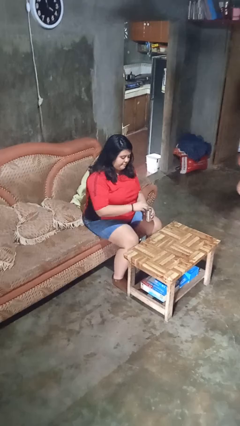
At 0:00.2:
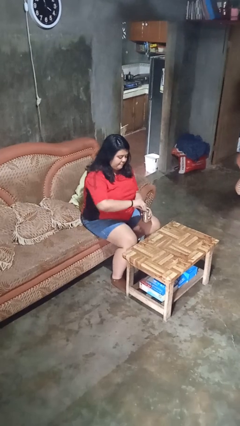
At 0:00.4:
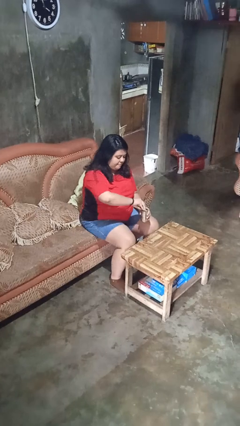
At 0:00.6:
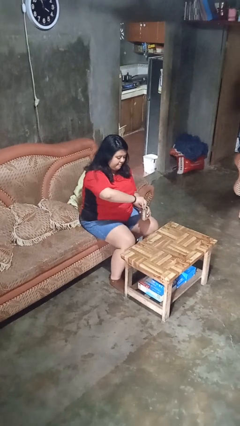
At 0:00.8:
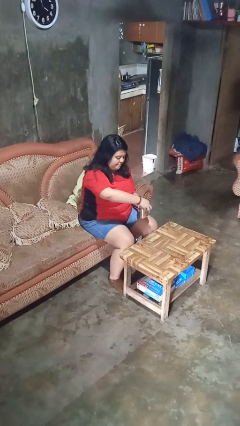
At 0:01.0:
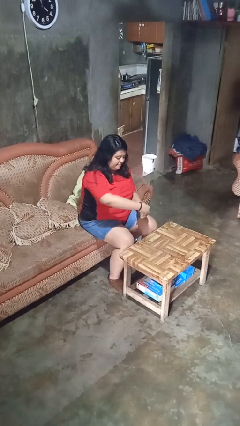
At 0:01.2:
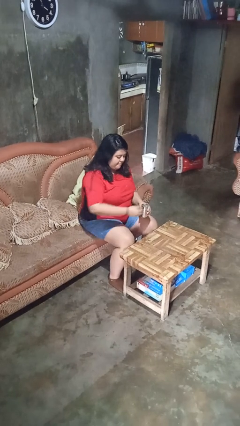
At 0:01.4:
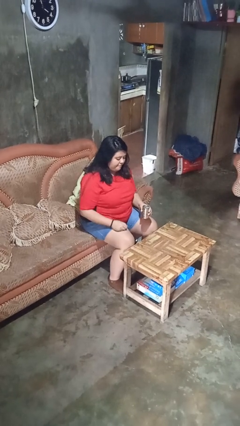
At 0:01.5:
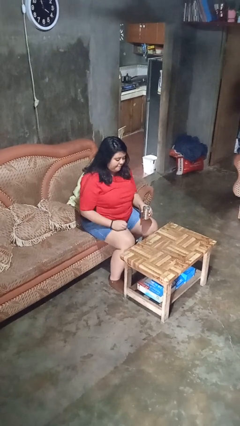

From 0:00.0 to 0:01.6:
person opens beverage can

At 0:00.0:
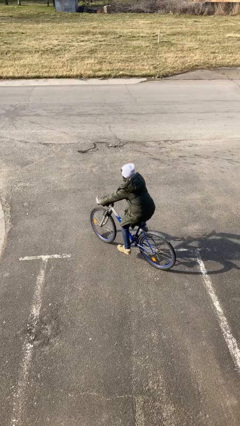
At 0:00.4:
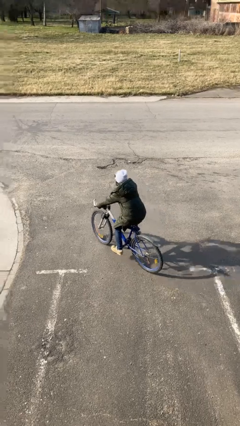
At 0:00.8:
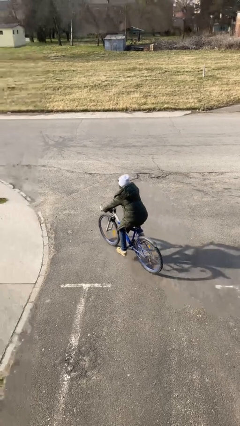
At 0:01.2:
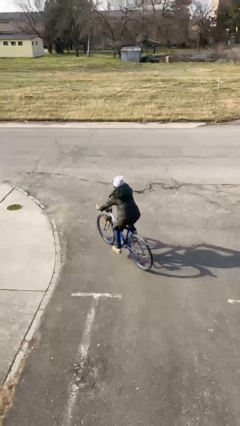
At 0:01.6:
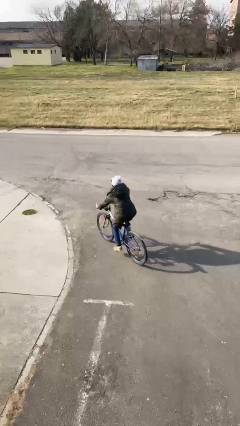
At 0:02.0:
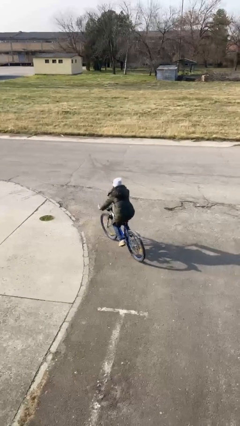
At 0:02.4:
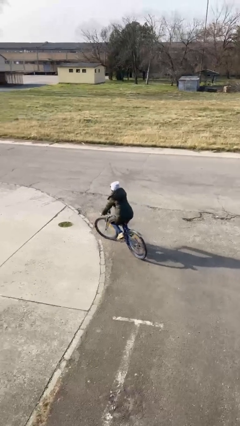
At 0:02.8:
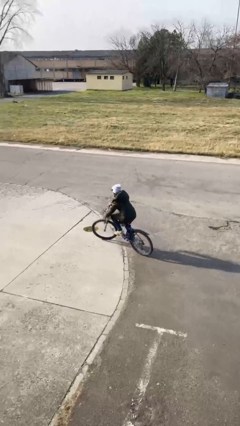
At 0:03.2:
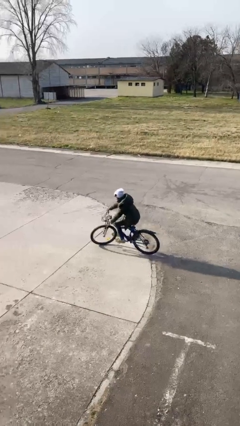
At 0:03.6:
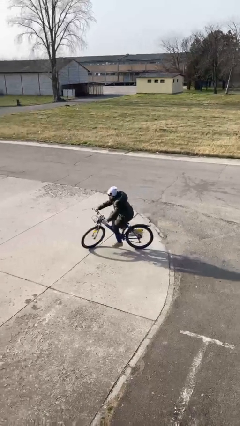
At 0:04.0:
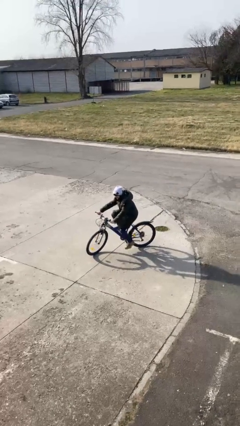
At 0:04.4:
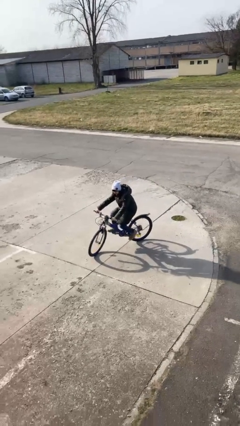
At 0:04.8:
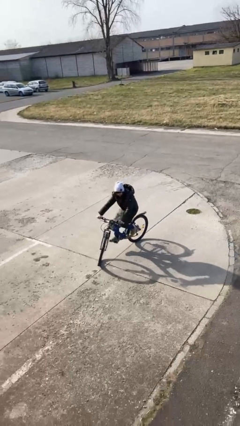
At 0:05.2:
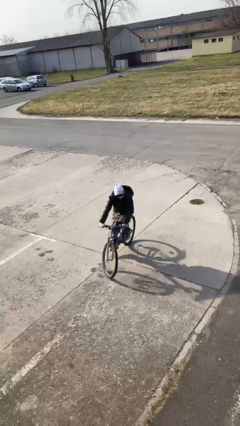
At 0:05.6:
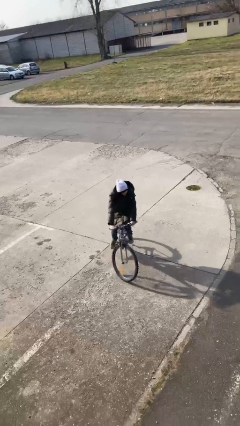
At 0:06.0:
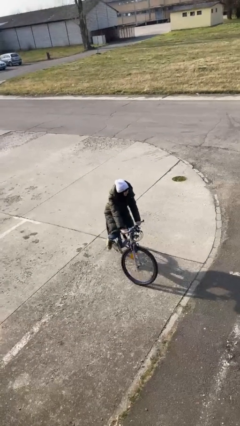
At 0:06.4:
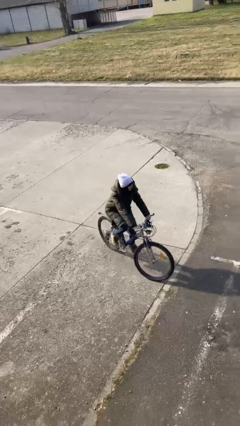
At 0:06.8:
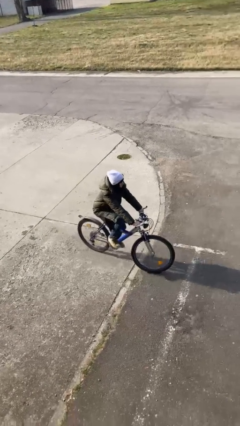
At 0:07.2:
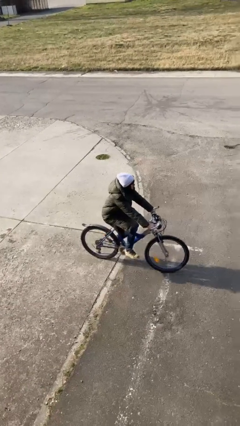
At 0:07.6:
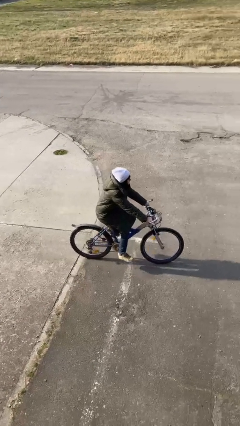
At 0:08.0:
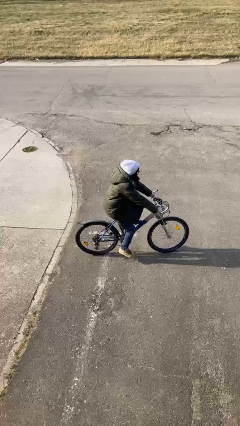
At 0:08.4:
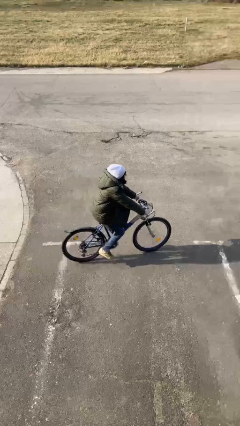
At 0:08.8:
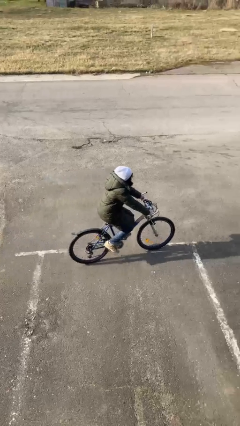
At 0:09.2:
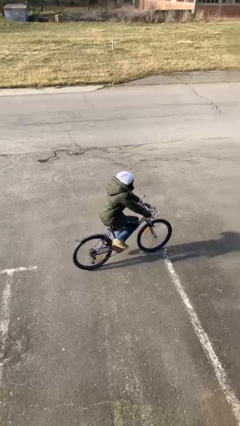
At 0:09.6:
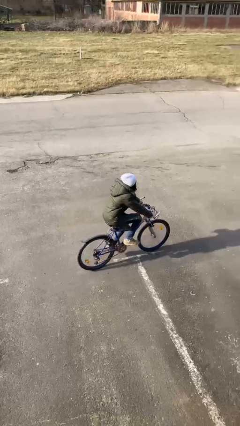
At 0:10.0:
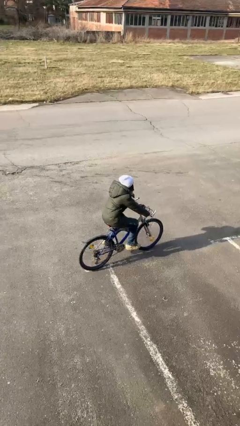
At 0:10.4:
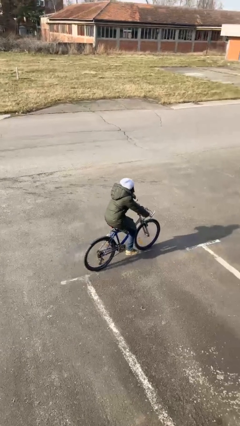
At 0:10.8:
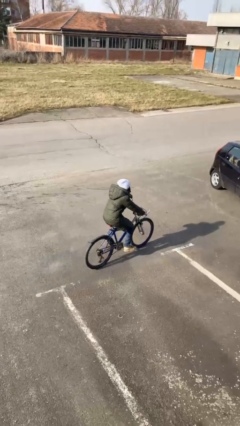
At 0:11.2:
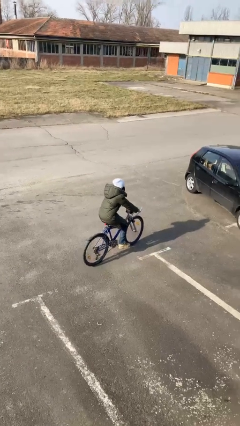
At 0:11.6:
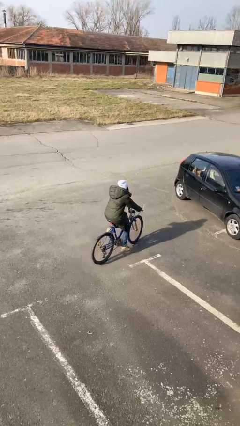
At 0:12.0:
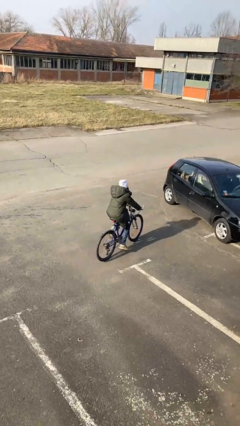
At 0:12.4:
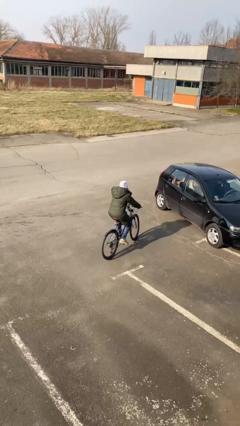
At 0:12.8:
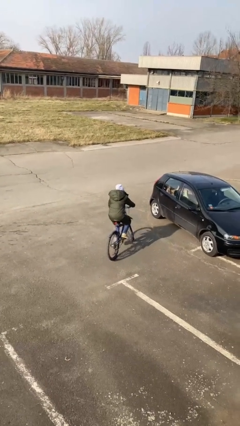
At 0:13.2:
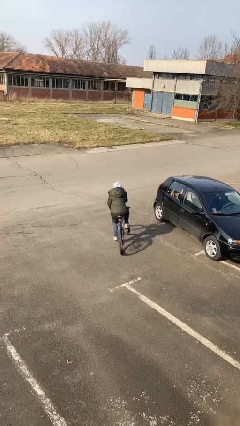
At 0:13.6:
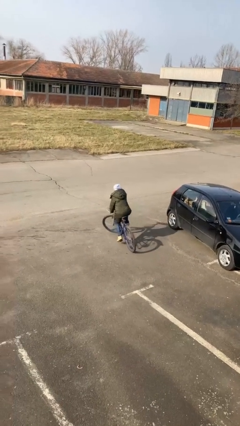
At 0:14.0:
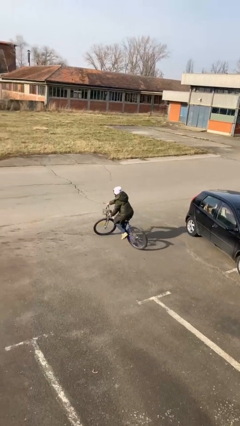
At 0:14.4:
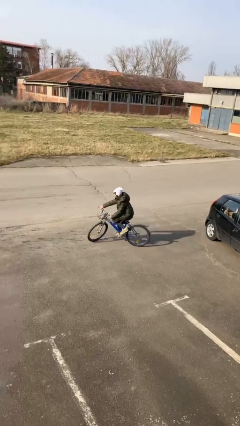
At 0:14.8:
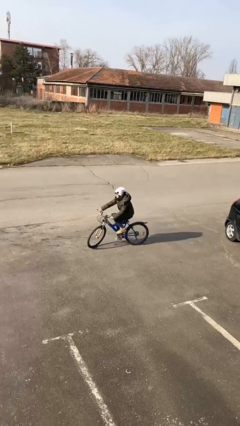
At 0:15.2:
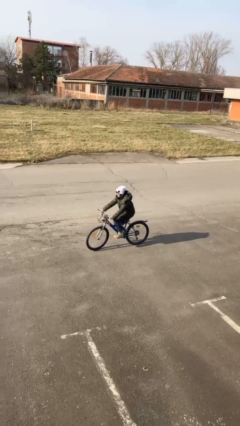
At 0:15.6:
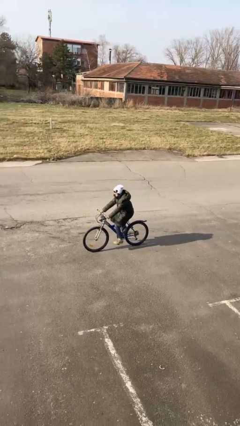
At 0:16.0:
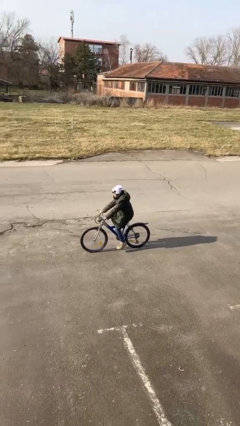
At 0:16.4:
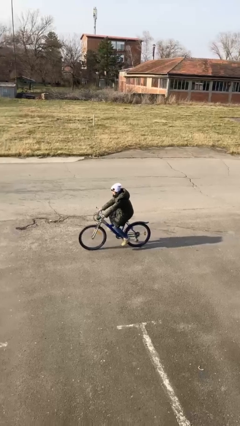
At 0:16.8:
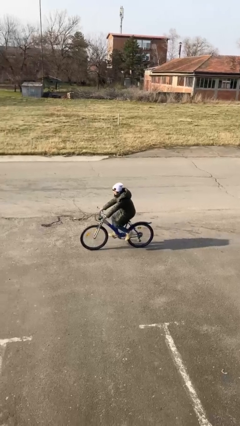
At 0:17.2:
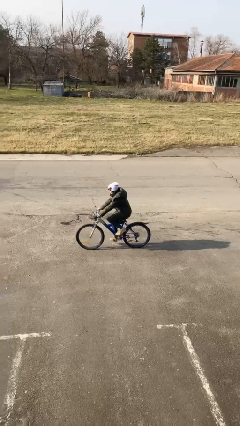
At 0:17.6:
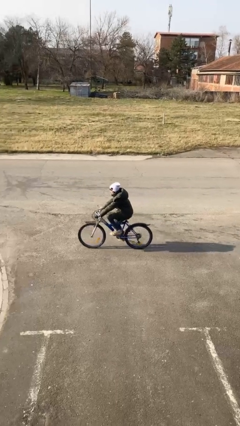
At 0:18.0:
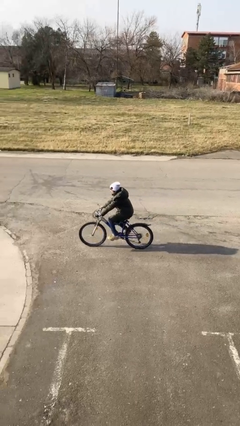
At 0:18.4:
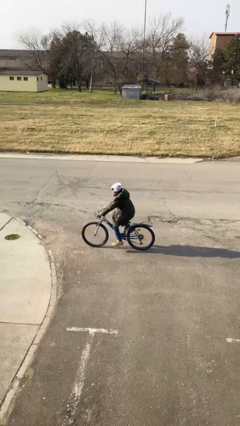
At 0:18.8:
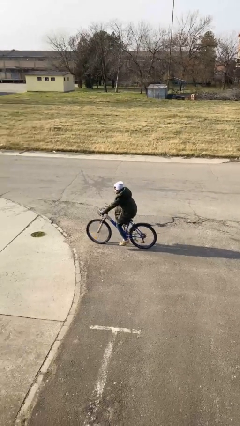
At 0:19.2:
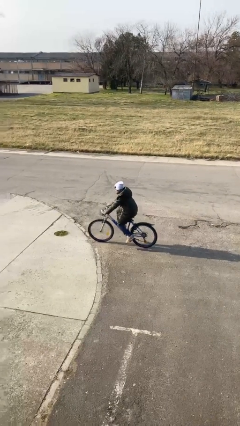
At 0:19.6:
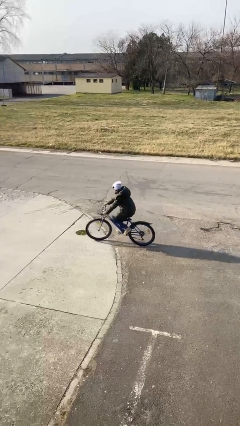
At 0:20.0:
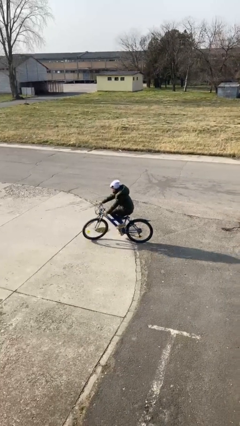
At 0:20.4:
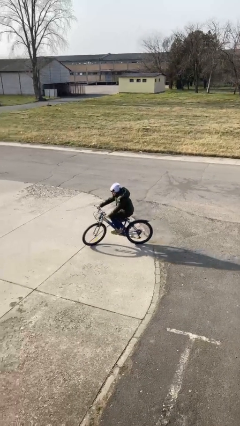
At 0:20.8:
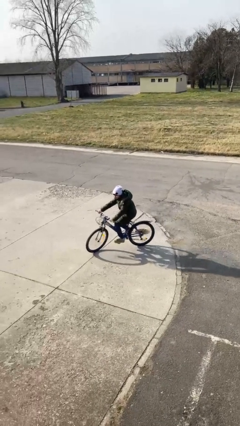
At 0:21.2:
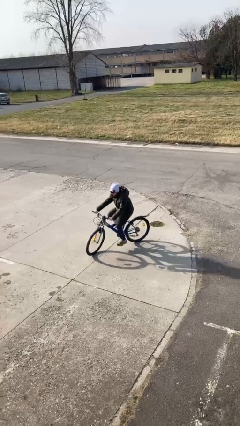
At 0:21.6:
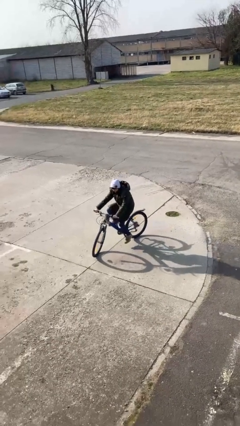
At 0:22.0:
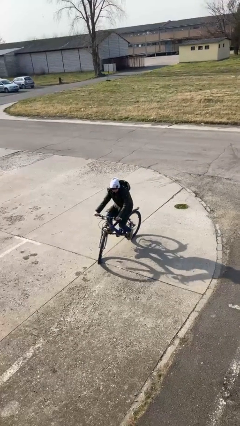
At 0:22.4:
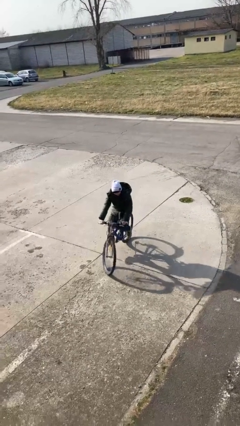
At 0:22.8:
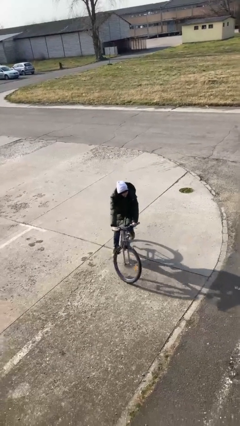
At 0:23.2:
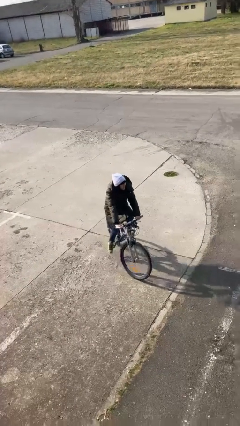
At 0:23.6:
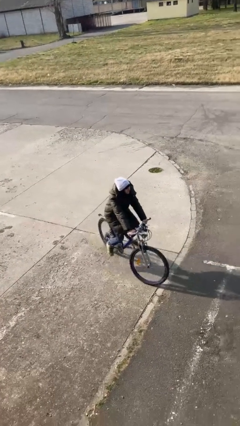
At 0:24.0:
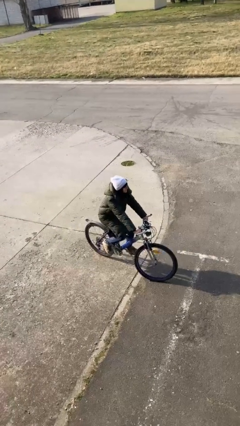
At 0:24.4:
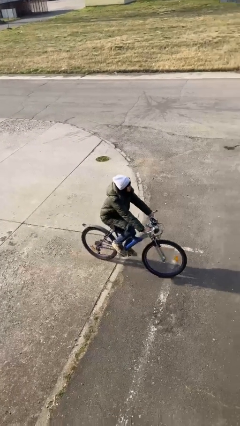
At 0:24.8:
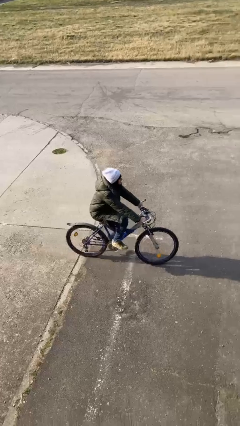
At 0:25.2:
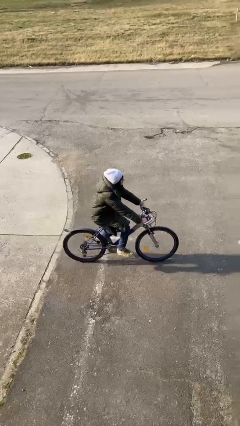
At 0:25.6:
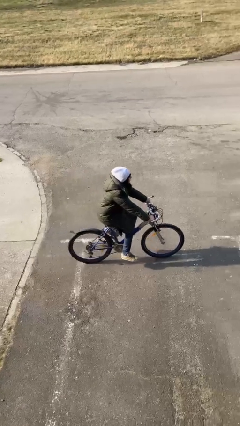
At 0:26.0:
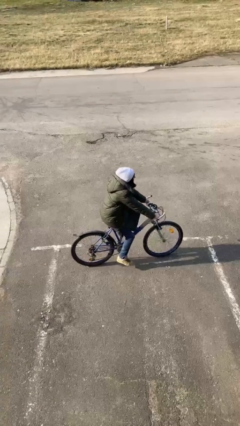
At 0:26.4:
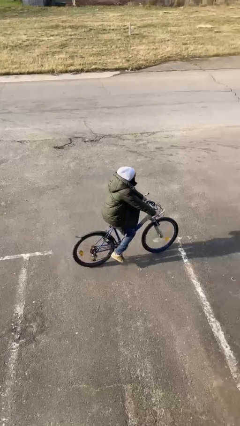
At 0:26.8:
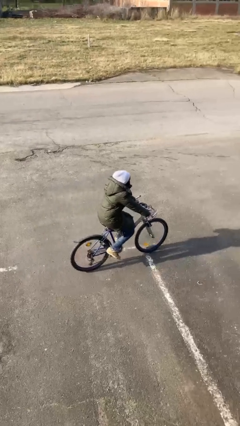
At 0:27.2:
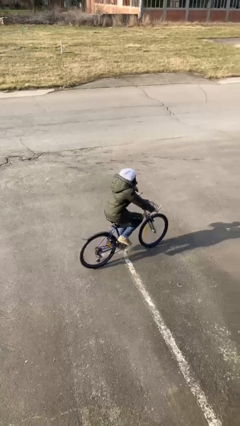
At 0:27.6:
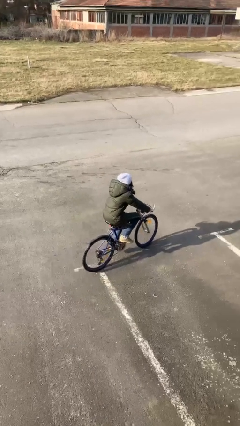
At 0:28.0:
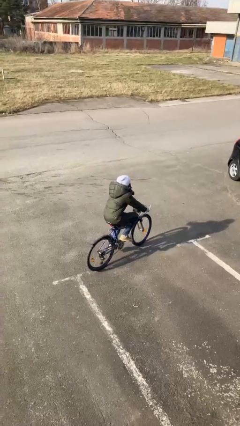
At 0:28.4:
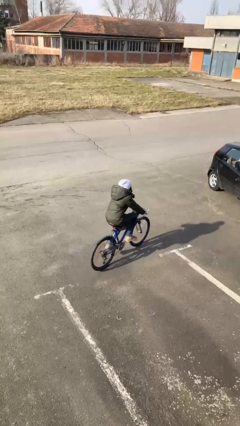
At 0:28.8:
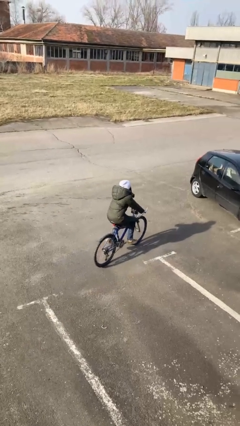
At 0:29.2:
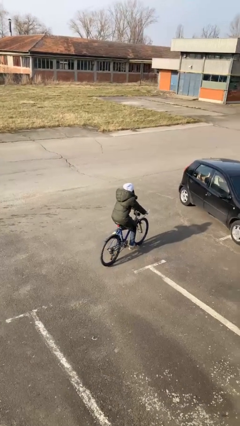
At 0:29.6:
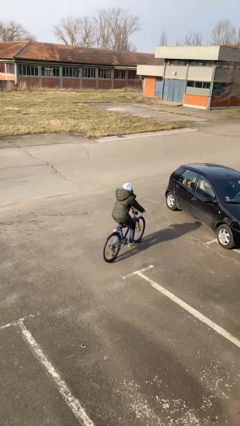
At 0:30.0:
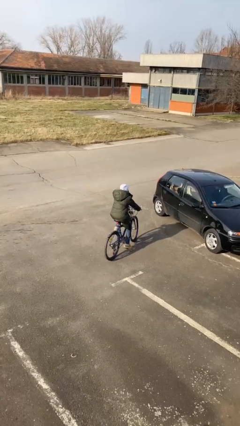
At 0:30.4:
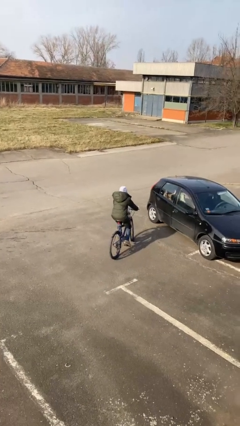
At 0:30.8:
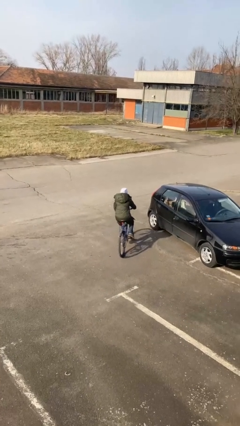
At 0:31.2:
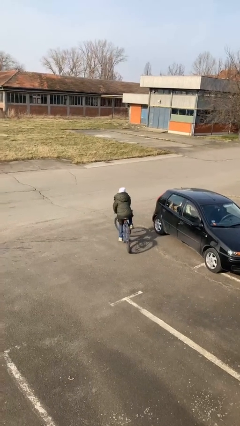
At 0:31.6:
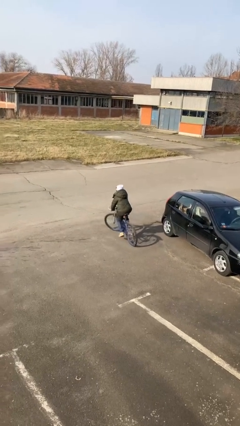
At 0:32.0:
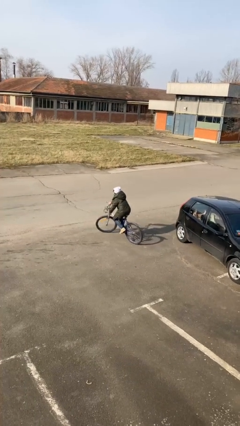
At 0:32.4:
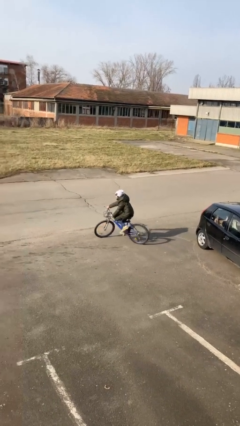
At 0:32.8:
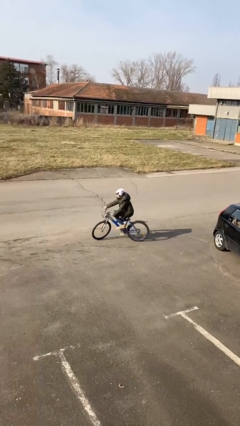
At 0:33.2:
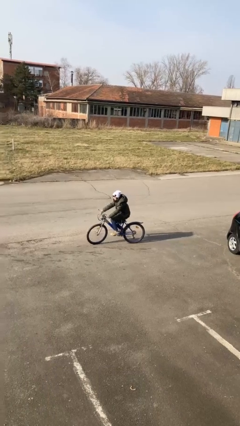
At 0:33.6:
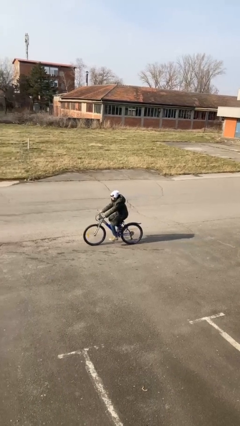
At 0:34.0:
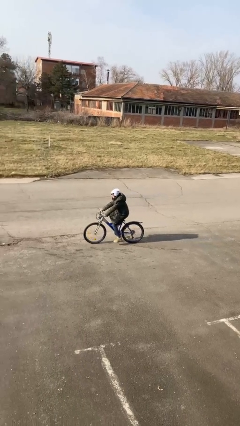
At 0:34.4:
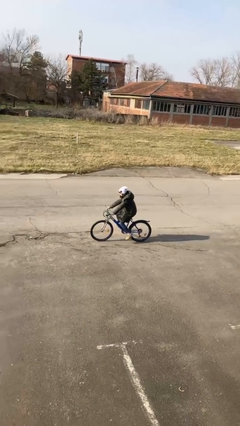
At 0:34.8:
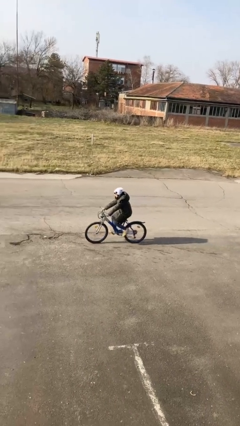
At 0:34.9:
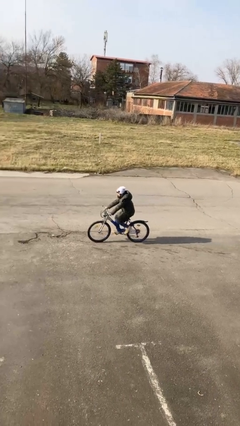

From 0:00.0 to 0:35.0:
person rides bicycle
